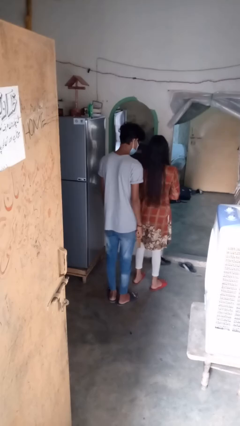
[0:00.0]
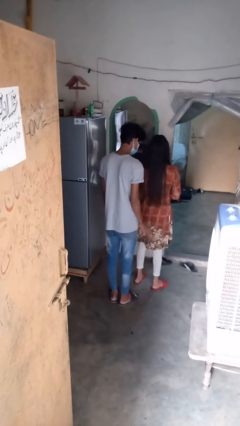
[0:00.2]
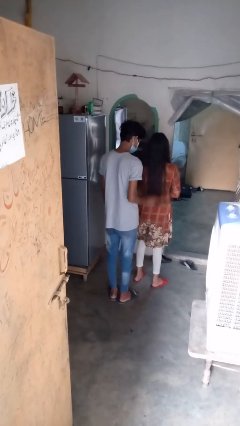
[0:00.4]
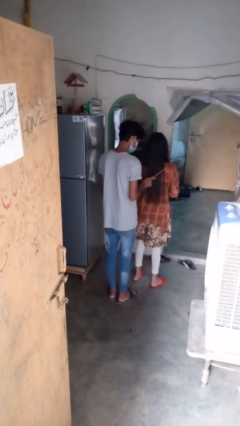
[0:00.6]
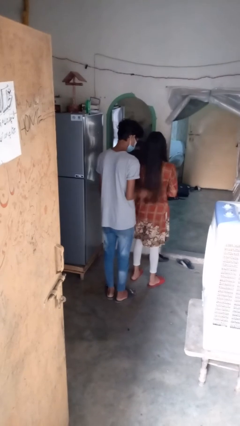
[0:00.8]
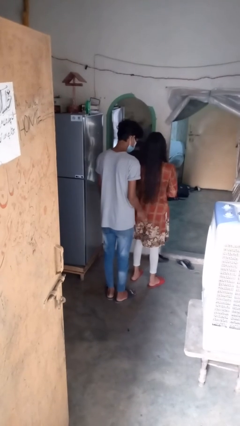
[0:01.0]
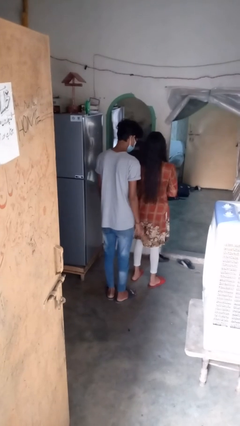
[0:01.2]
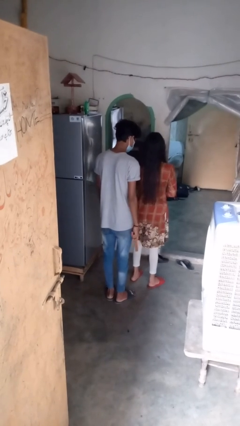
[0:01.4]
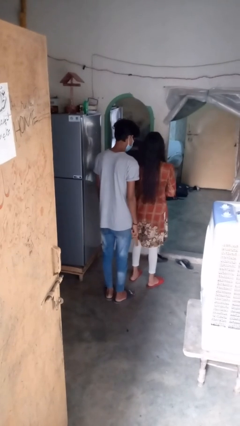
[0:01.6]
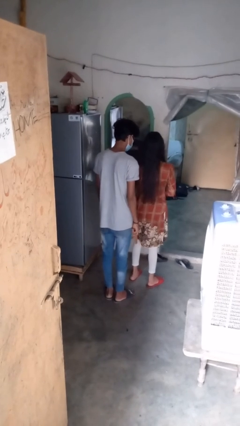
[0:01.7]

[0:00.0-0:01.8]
person brushes hair of person

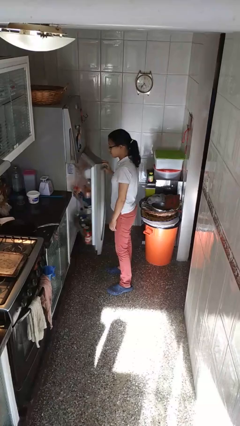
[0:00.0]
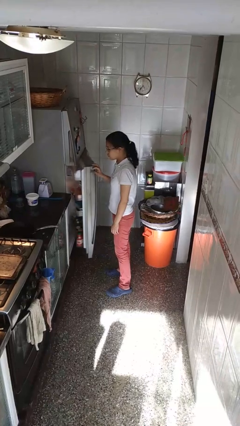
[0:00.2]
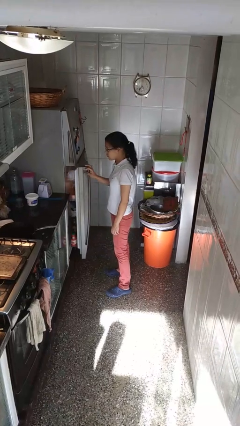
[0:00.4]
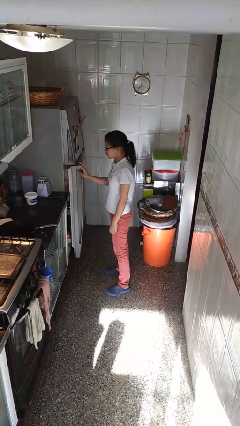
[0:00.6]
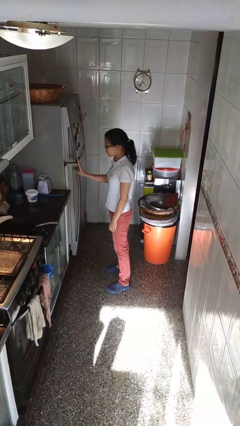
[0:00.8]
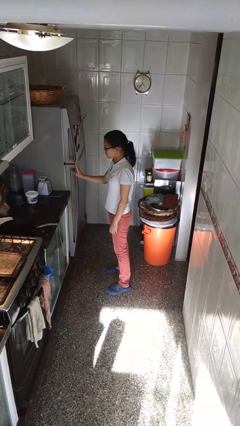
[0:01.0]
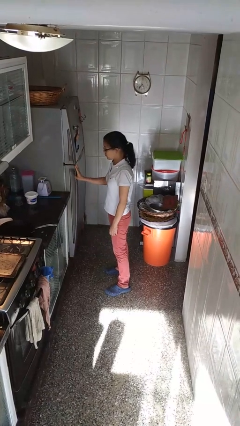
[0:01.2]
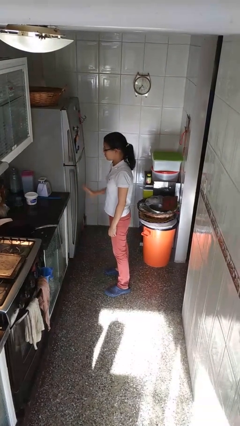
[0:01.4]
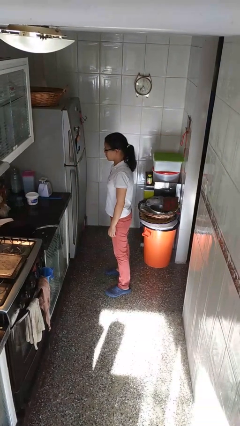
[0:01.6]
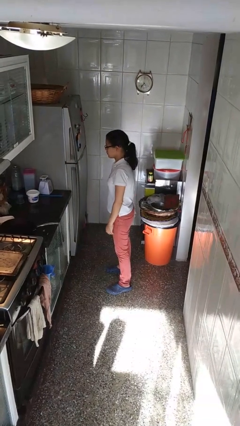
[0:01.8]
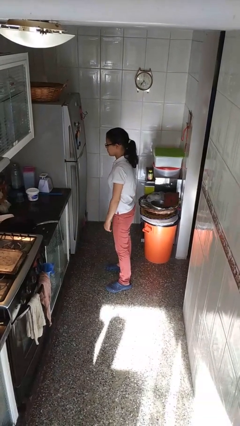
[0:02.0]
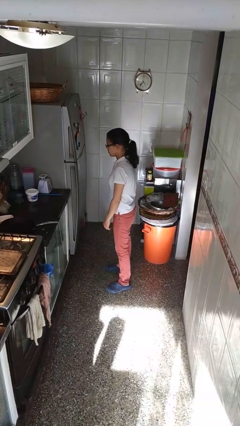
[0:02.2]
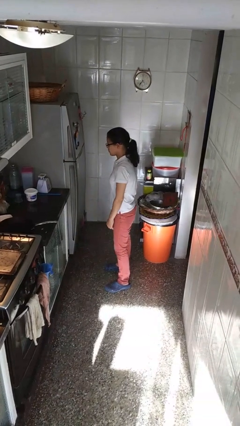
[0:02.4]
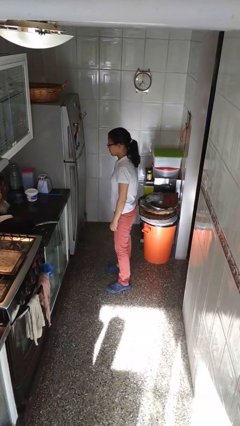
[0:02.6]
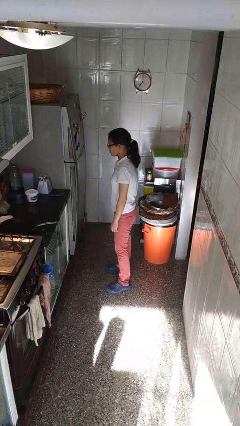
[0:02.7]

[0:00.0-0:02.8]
person closes refrigerator

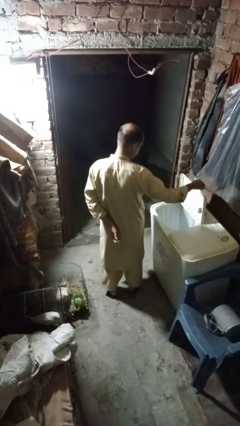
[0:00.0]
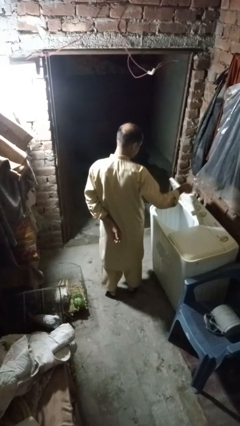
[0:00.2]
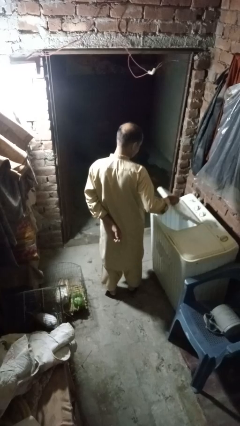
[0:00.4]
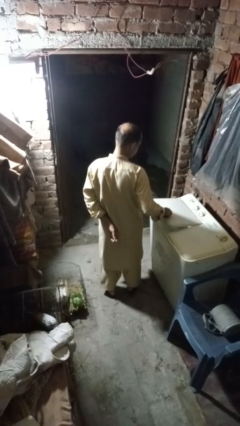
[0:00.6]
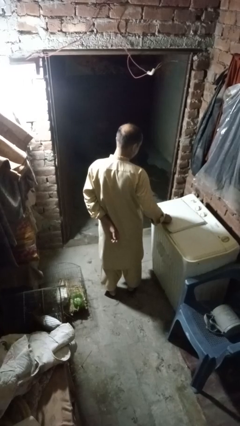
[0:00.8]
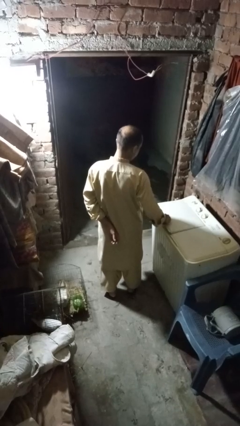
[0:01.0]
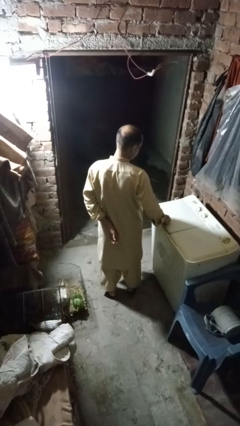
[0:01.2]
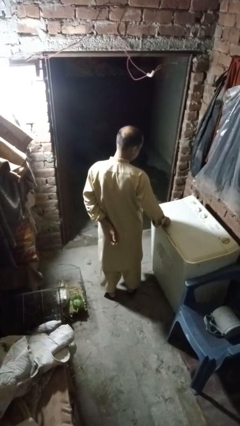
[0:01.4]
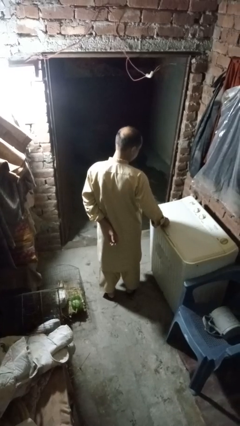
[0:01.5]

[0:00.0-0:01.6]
person closes clothes washer

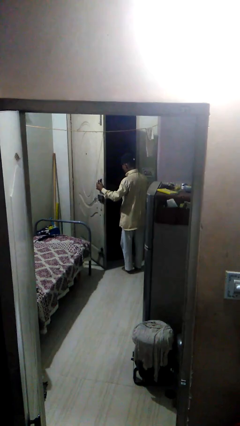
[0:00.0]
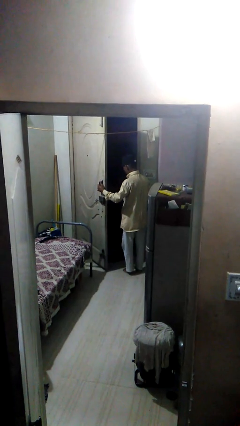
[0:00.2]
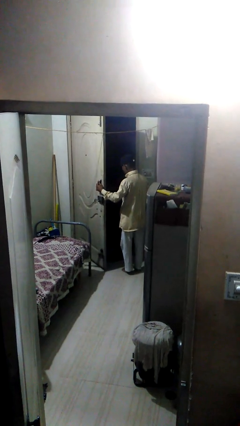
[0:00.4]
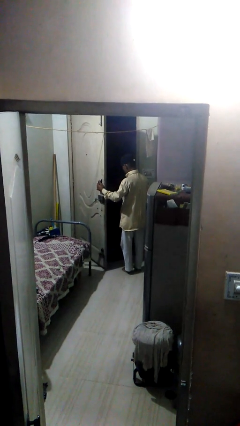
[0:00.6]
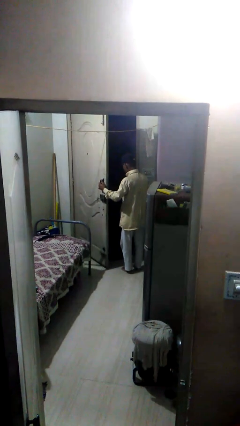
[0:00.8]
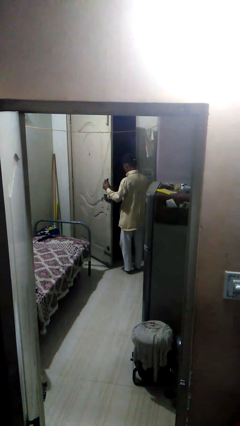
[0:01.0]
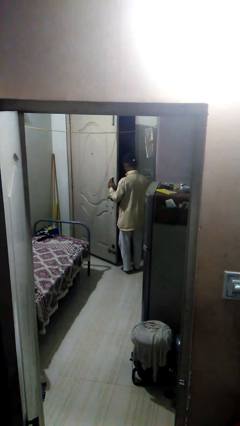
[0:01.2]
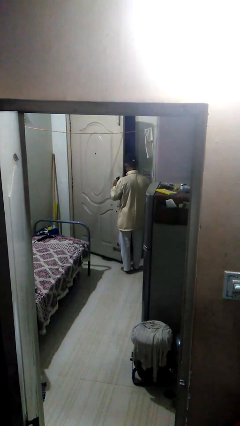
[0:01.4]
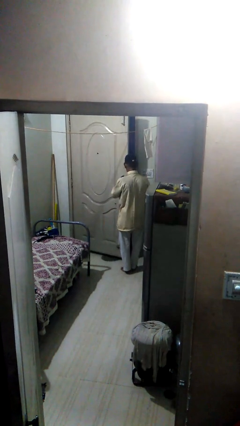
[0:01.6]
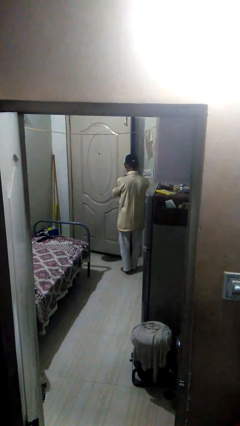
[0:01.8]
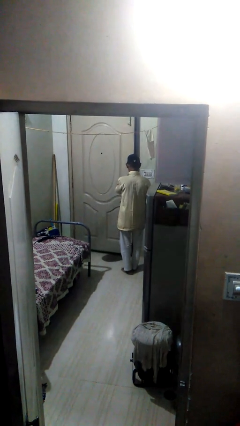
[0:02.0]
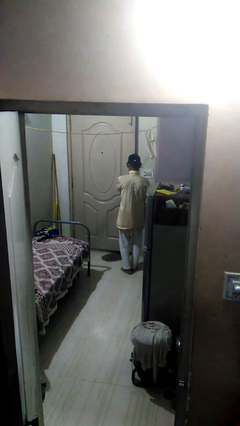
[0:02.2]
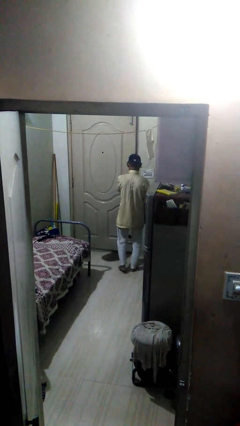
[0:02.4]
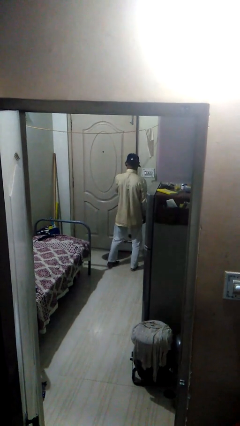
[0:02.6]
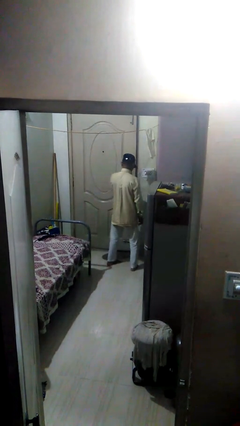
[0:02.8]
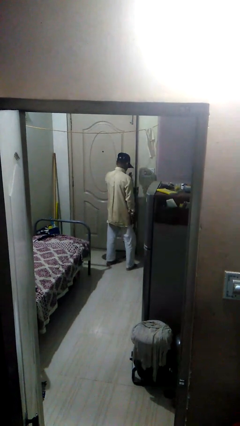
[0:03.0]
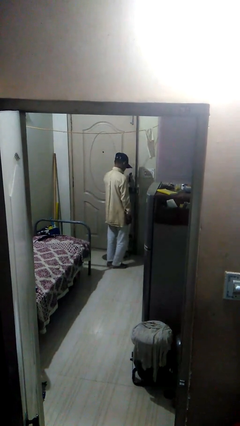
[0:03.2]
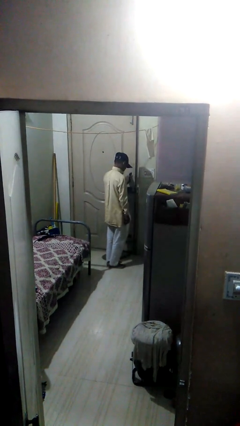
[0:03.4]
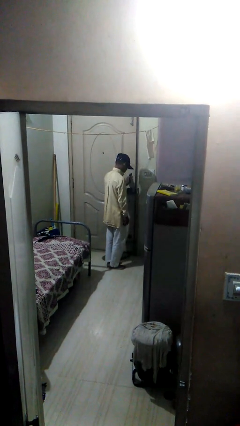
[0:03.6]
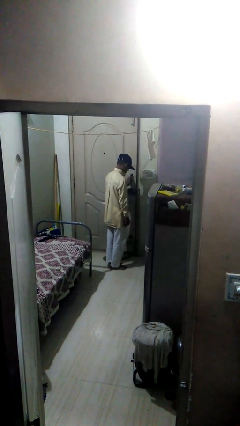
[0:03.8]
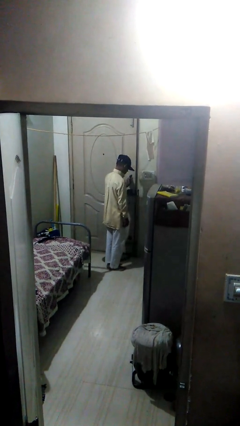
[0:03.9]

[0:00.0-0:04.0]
person closes facility door

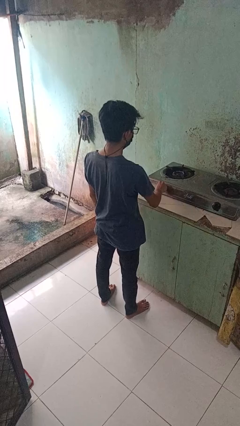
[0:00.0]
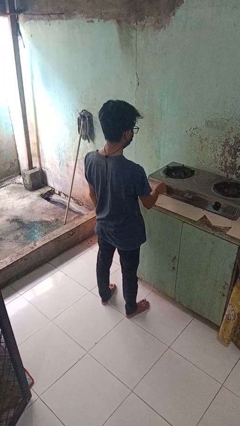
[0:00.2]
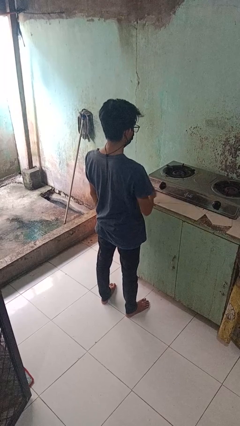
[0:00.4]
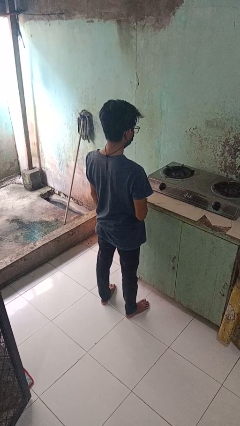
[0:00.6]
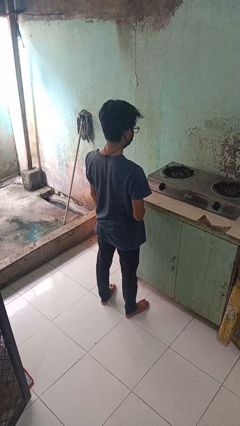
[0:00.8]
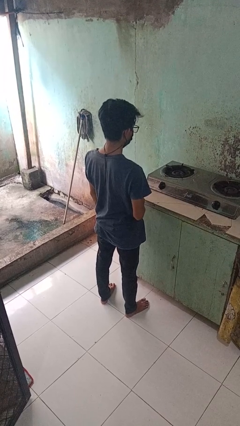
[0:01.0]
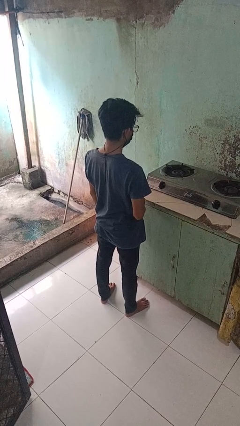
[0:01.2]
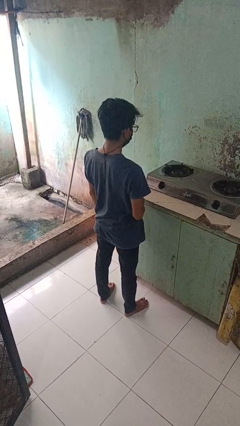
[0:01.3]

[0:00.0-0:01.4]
person turns off stovetop

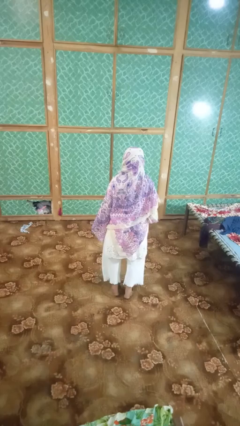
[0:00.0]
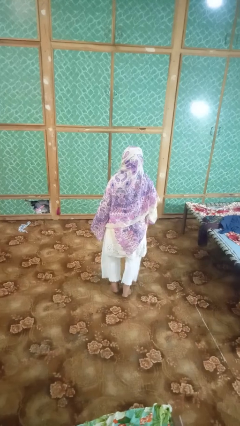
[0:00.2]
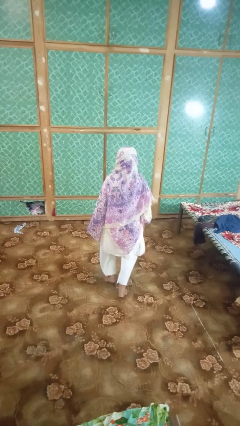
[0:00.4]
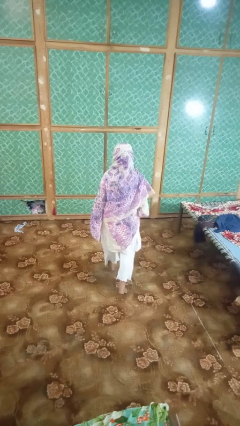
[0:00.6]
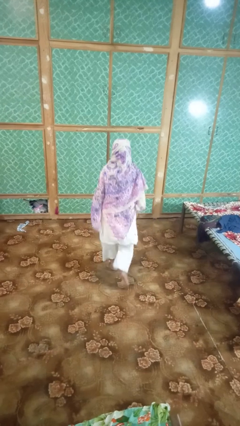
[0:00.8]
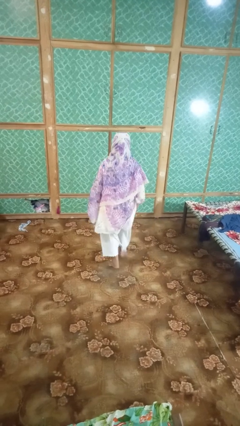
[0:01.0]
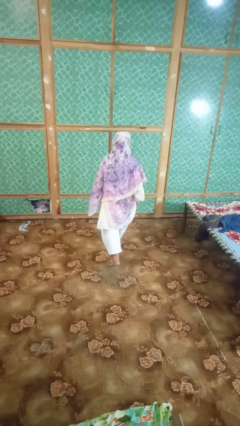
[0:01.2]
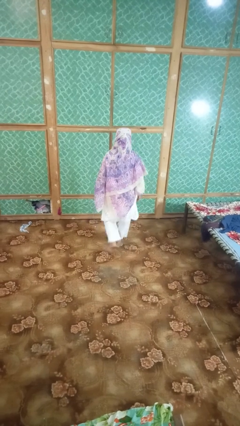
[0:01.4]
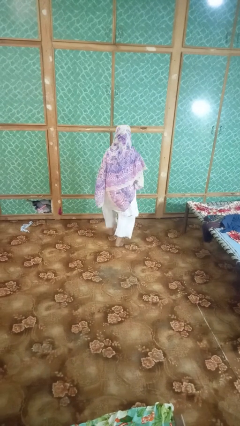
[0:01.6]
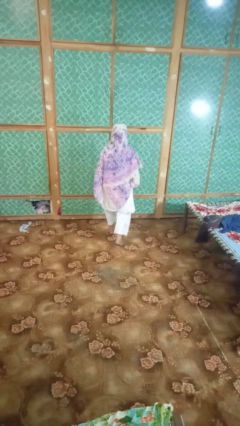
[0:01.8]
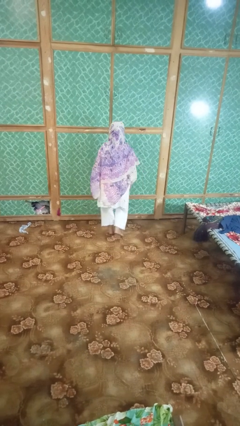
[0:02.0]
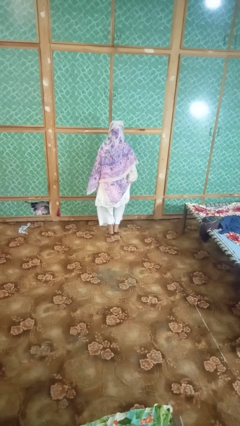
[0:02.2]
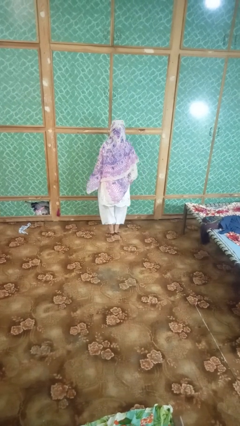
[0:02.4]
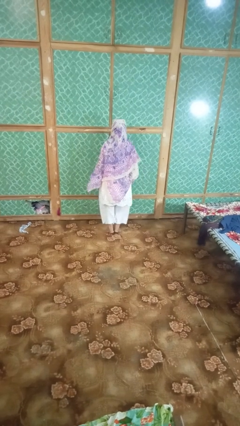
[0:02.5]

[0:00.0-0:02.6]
person walks tiptoe

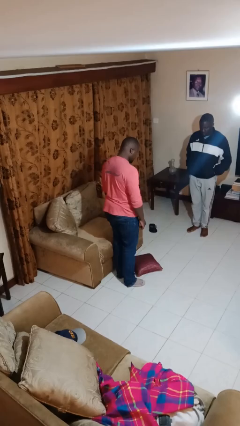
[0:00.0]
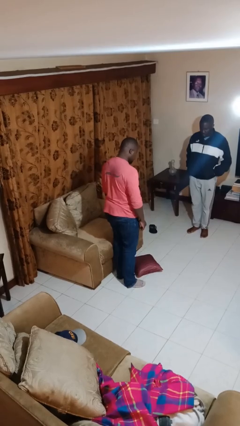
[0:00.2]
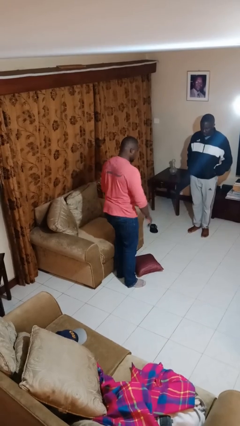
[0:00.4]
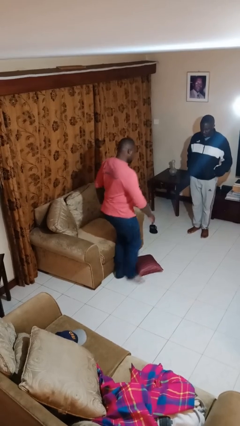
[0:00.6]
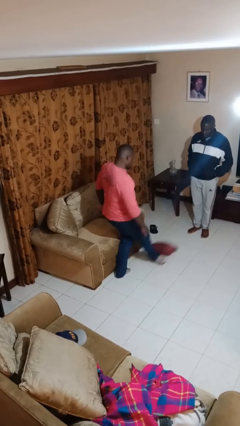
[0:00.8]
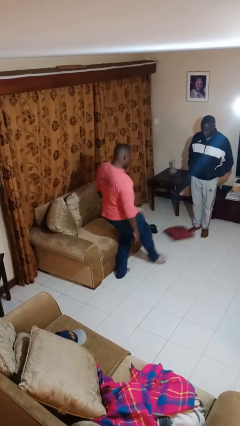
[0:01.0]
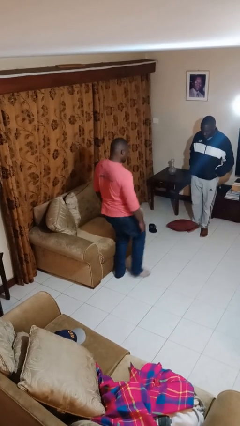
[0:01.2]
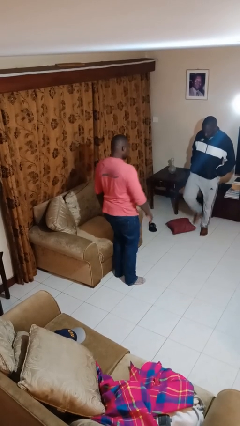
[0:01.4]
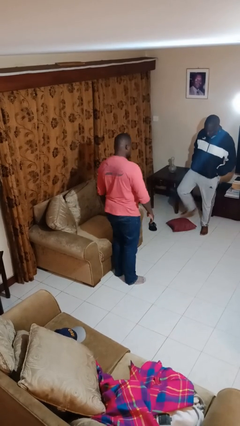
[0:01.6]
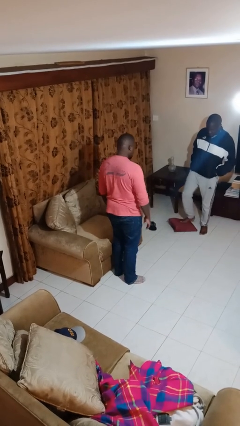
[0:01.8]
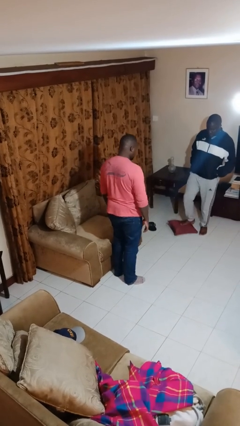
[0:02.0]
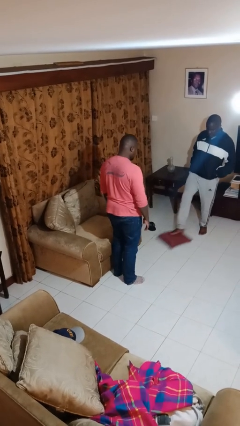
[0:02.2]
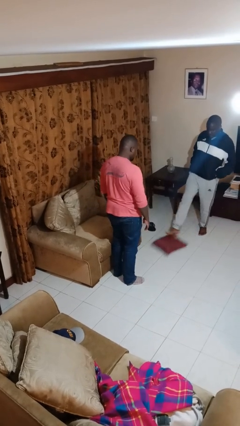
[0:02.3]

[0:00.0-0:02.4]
person kicks object to person

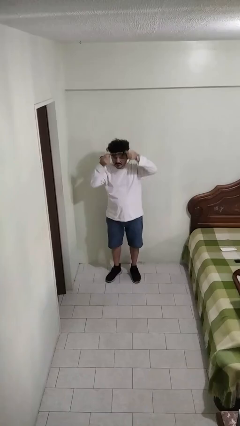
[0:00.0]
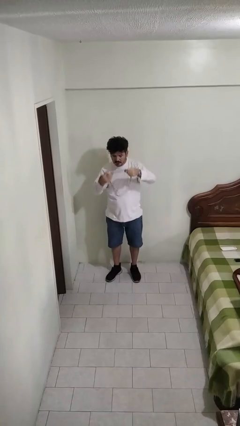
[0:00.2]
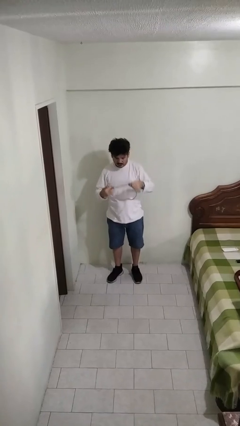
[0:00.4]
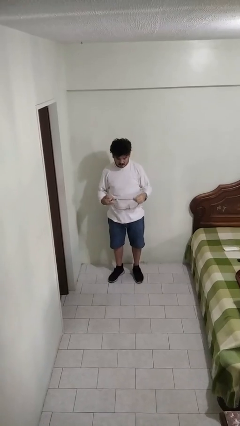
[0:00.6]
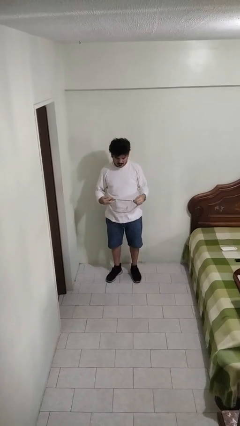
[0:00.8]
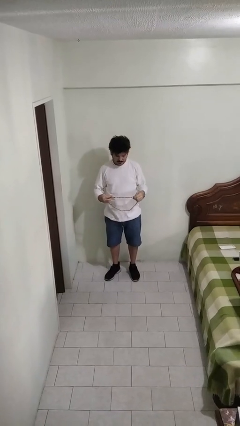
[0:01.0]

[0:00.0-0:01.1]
person takes off necklace
